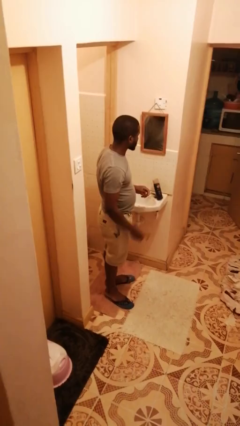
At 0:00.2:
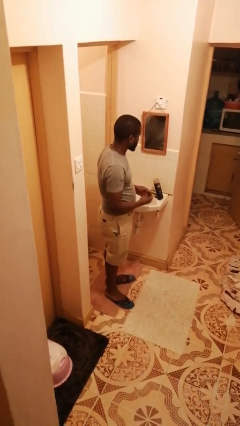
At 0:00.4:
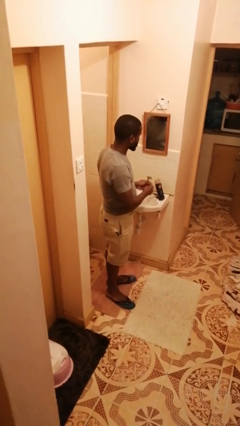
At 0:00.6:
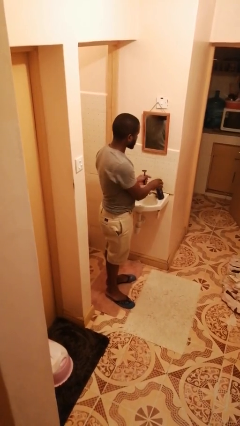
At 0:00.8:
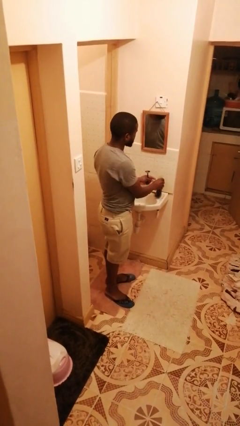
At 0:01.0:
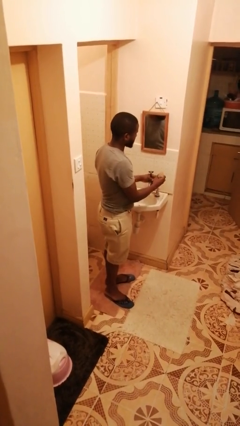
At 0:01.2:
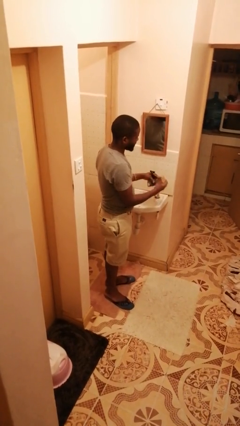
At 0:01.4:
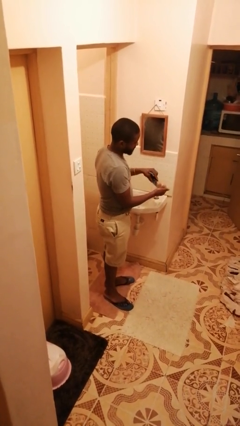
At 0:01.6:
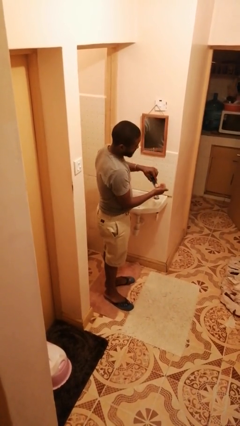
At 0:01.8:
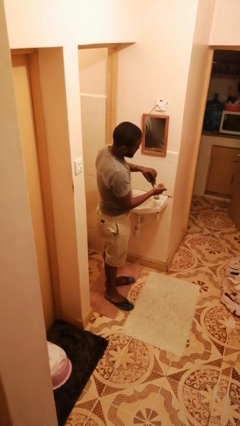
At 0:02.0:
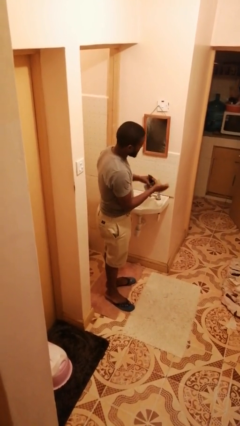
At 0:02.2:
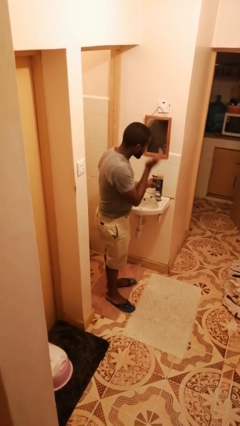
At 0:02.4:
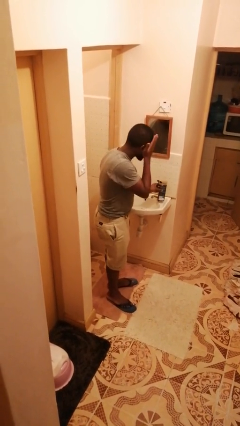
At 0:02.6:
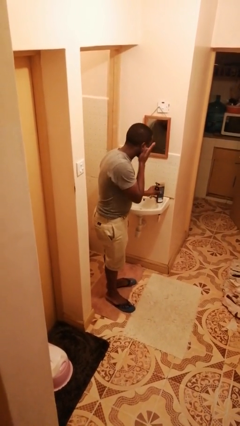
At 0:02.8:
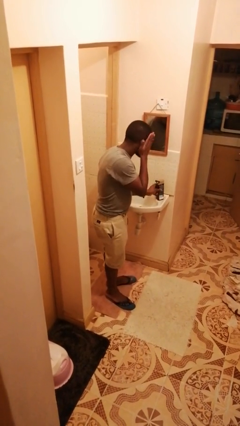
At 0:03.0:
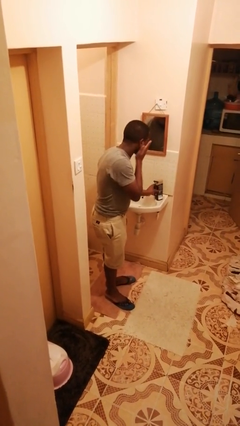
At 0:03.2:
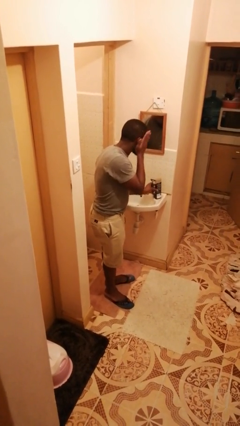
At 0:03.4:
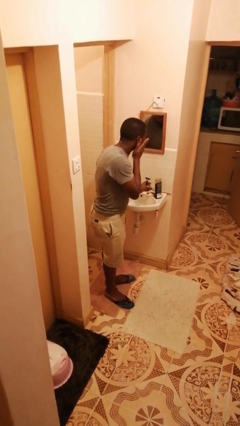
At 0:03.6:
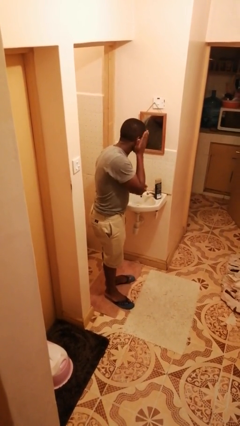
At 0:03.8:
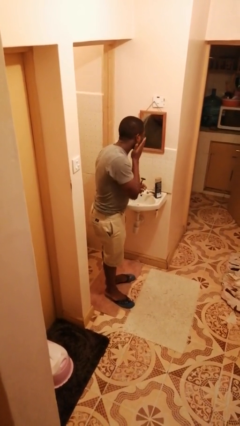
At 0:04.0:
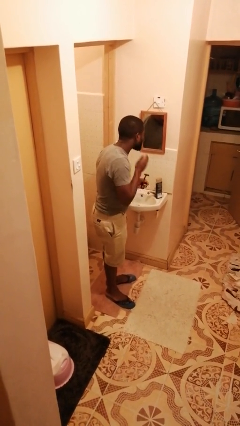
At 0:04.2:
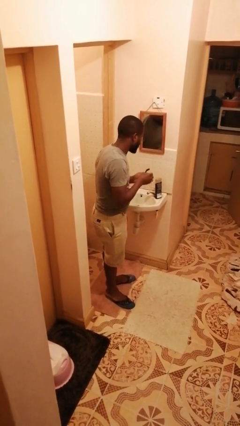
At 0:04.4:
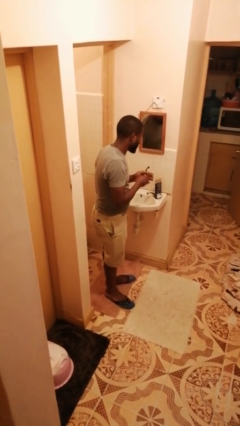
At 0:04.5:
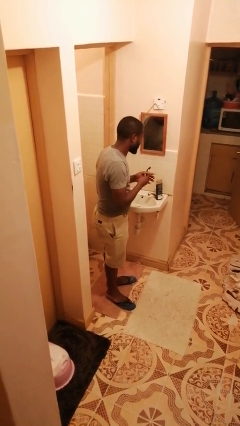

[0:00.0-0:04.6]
person applies shaving cream

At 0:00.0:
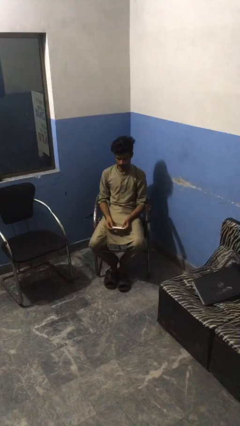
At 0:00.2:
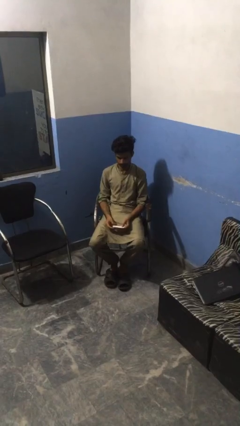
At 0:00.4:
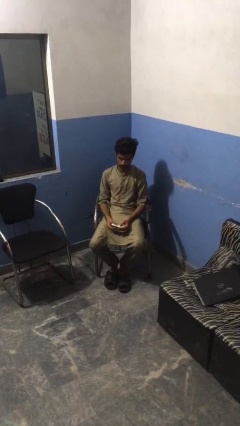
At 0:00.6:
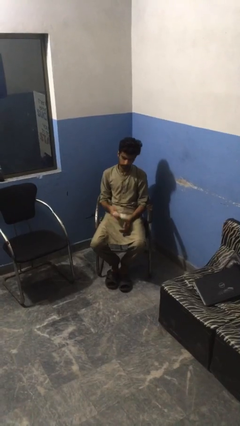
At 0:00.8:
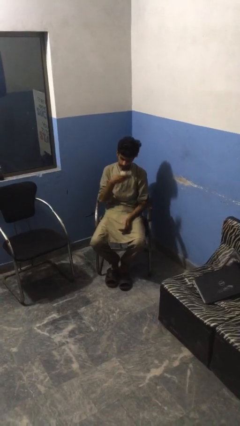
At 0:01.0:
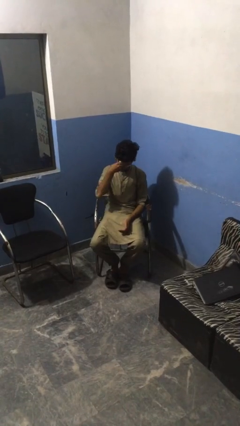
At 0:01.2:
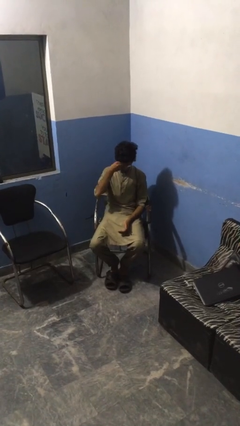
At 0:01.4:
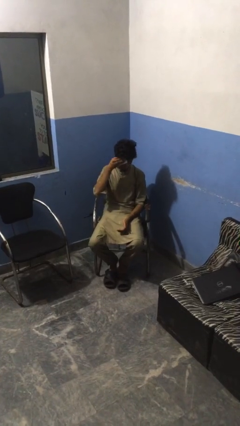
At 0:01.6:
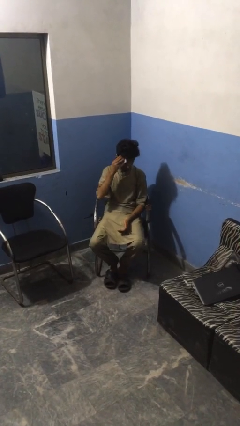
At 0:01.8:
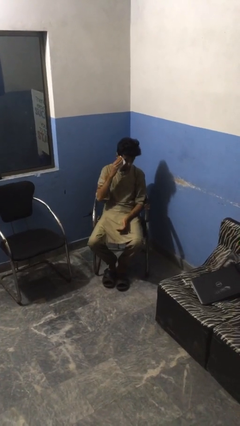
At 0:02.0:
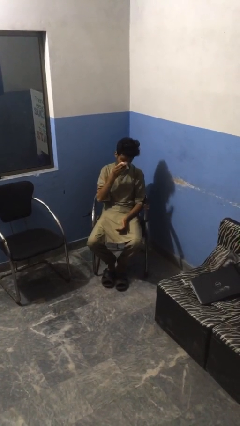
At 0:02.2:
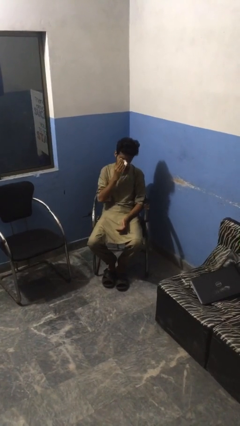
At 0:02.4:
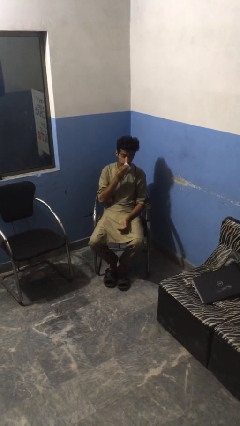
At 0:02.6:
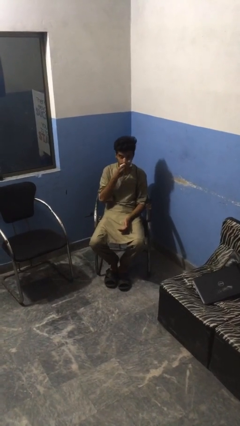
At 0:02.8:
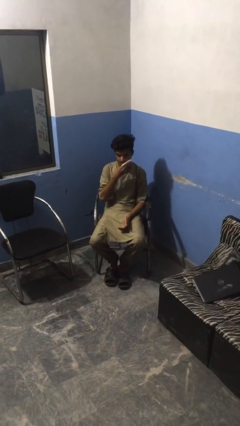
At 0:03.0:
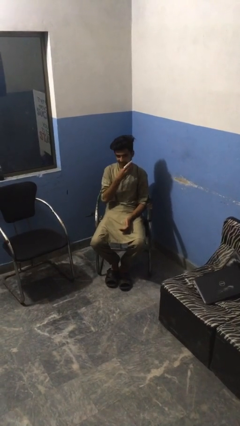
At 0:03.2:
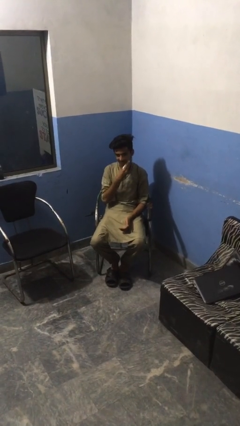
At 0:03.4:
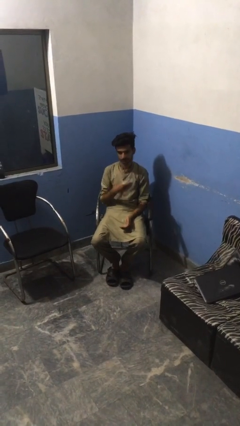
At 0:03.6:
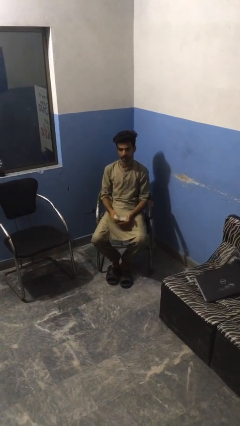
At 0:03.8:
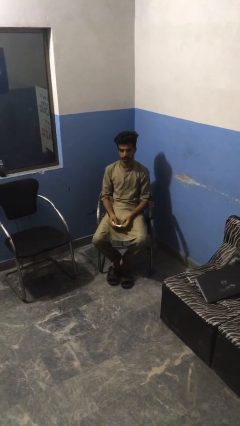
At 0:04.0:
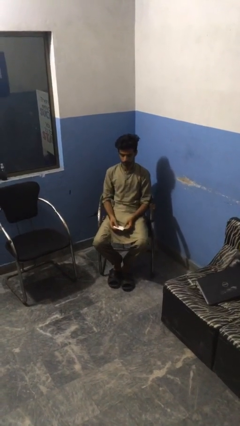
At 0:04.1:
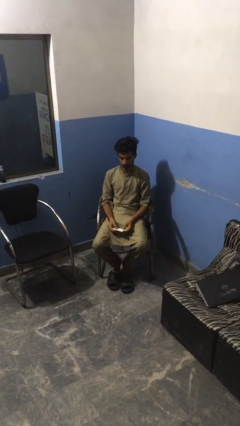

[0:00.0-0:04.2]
person wipes mouth with napkin

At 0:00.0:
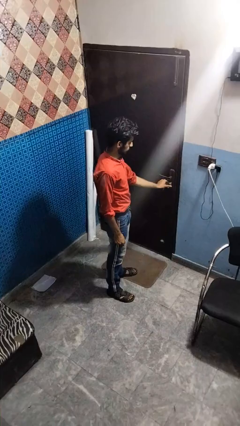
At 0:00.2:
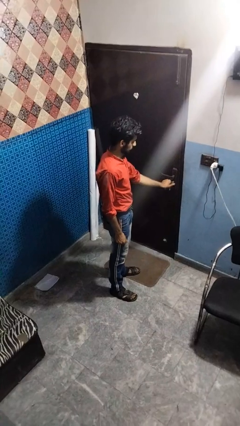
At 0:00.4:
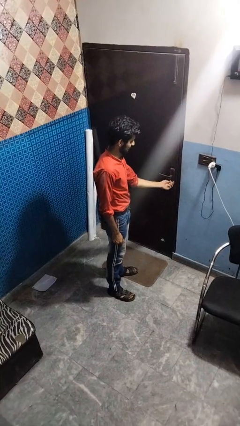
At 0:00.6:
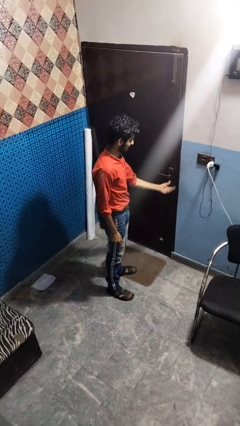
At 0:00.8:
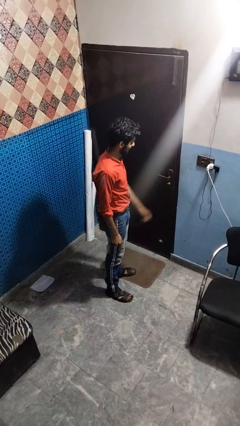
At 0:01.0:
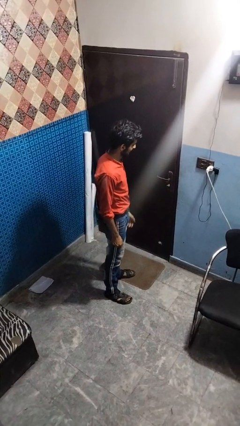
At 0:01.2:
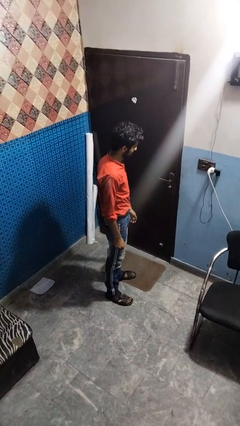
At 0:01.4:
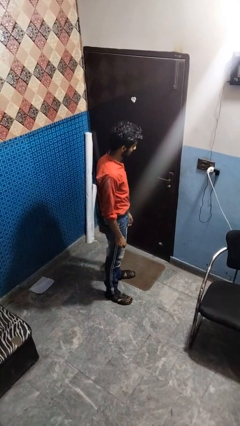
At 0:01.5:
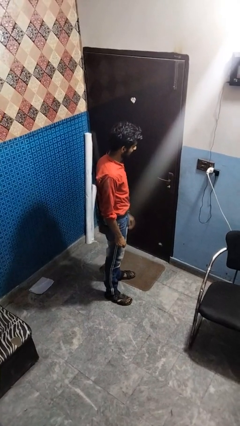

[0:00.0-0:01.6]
person unlocks door with keys

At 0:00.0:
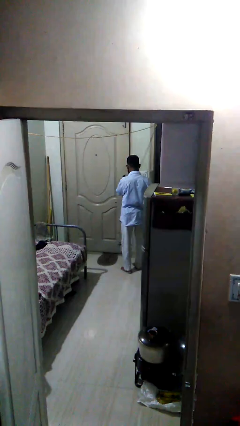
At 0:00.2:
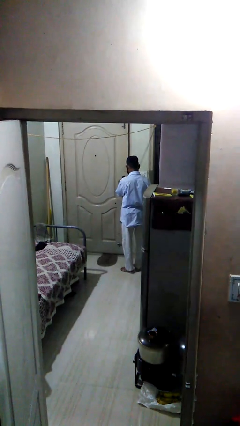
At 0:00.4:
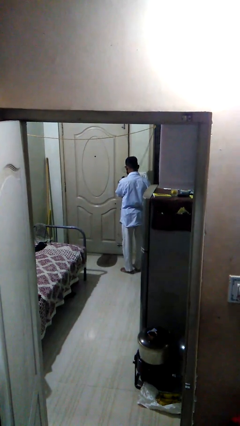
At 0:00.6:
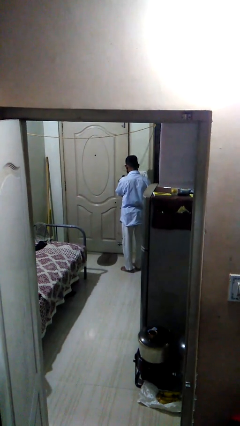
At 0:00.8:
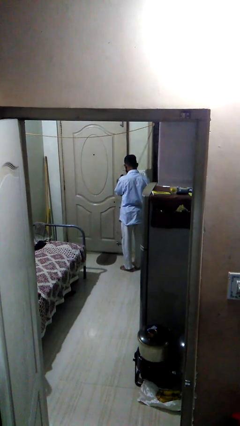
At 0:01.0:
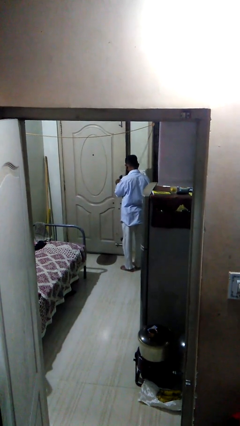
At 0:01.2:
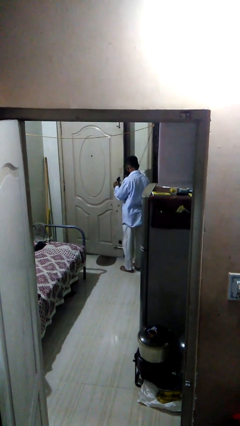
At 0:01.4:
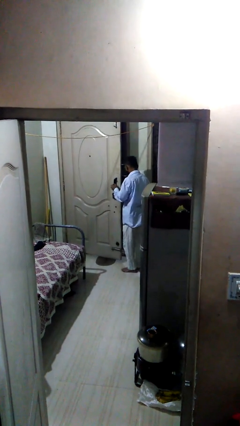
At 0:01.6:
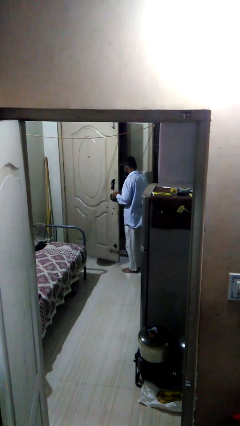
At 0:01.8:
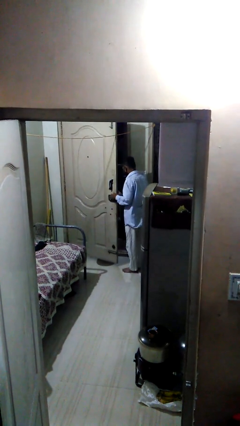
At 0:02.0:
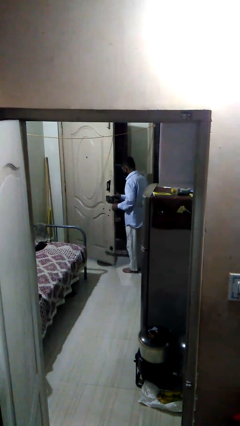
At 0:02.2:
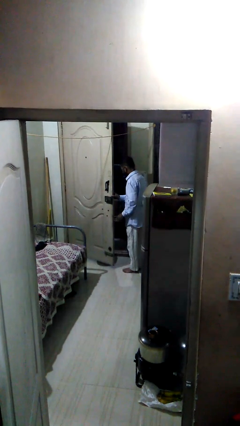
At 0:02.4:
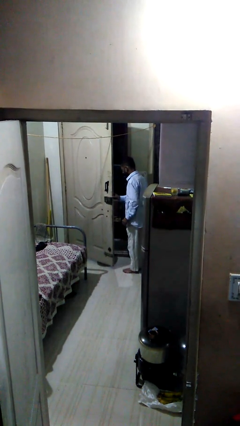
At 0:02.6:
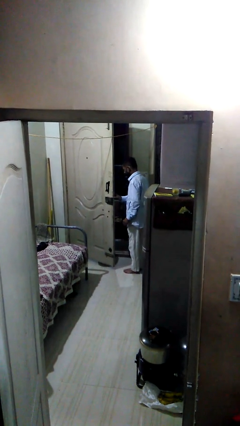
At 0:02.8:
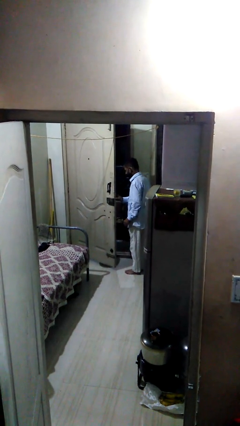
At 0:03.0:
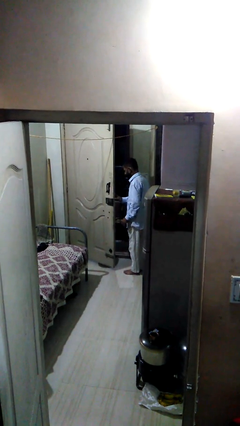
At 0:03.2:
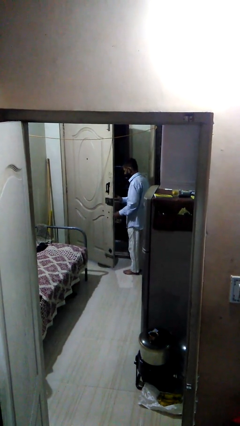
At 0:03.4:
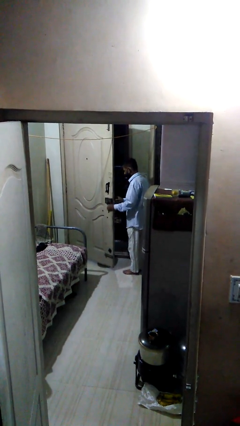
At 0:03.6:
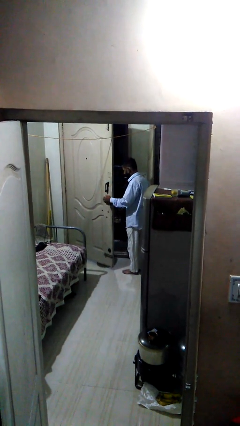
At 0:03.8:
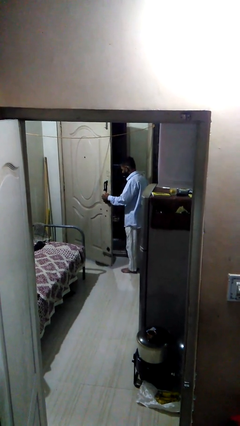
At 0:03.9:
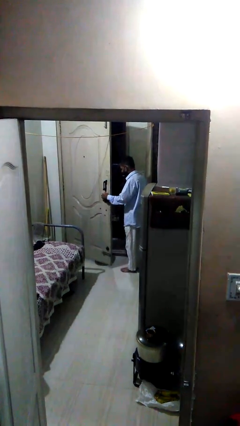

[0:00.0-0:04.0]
person opens facility door

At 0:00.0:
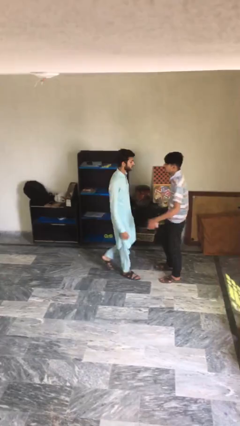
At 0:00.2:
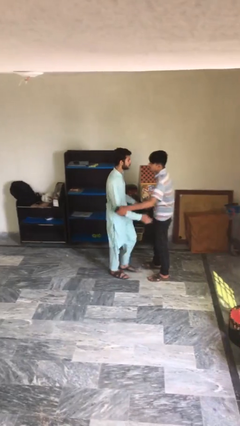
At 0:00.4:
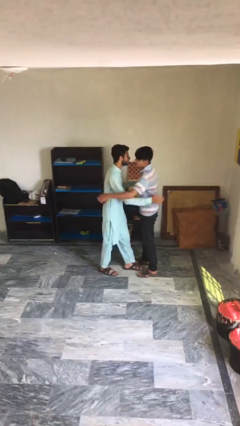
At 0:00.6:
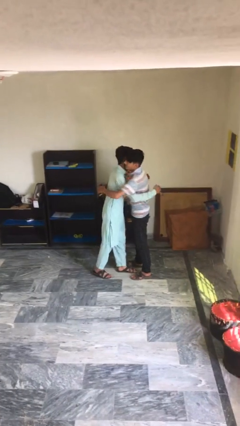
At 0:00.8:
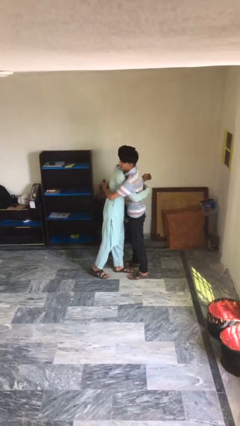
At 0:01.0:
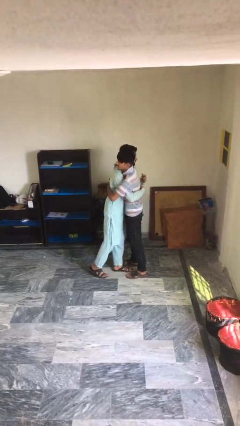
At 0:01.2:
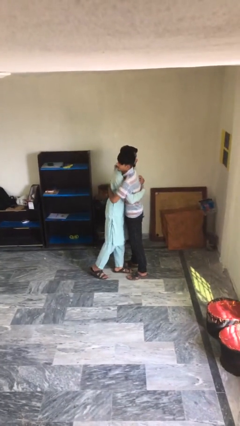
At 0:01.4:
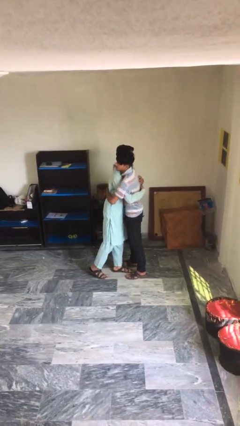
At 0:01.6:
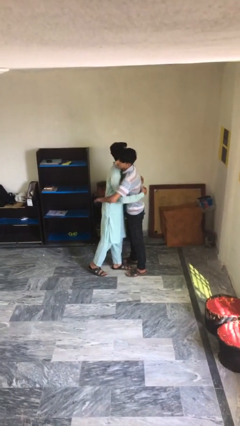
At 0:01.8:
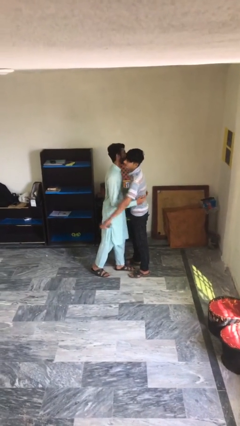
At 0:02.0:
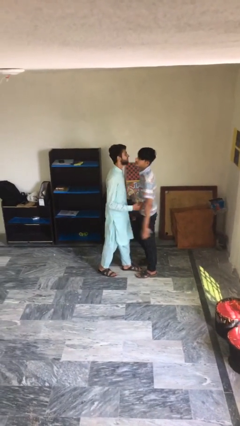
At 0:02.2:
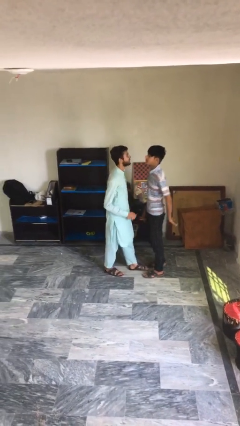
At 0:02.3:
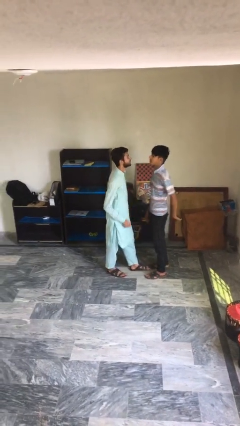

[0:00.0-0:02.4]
person embraces person

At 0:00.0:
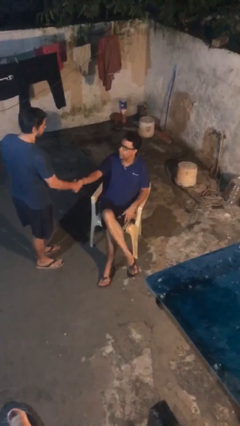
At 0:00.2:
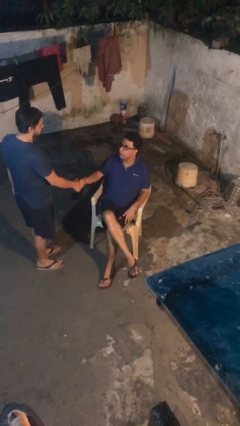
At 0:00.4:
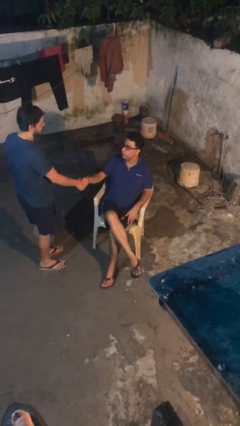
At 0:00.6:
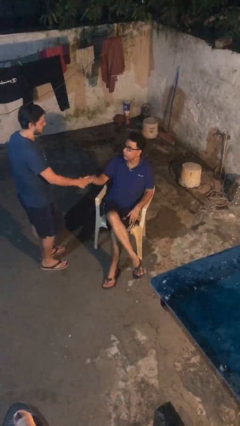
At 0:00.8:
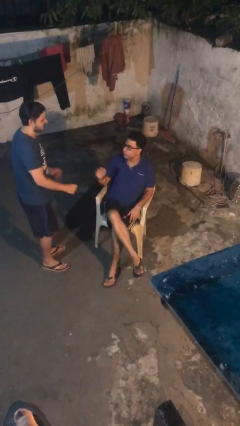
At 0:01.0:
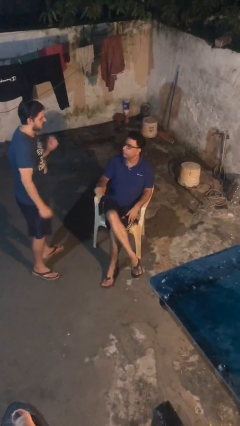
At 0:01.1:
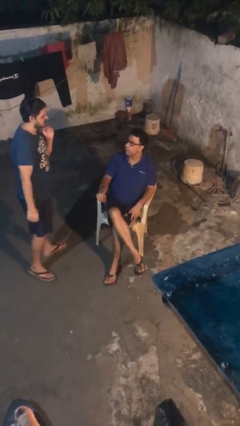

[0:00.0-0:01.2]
person shakes hand
